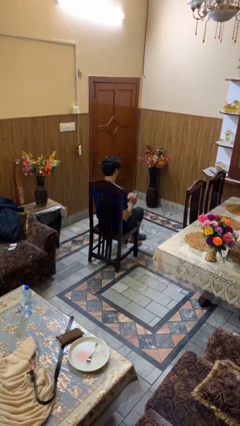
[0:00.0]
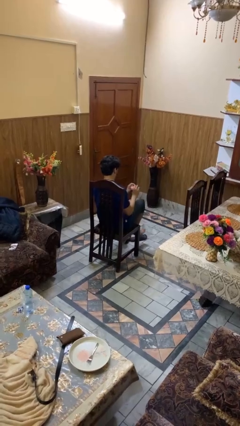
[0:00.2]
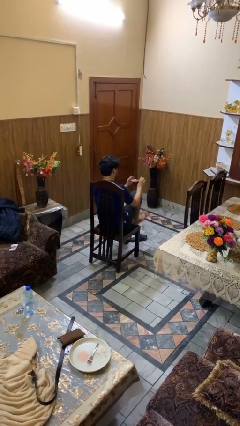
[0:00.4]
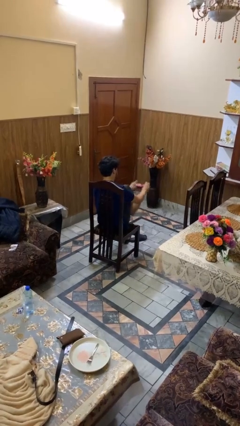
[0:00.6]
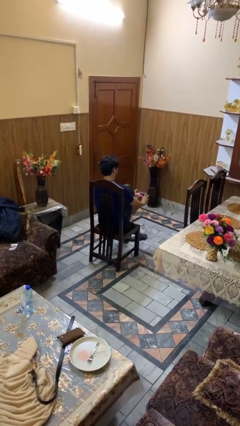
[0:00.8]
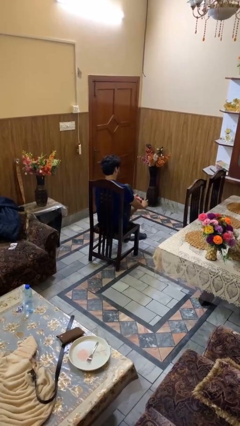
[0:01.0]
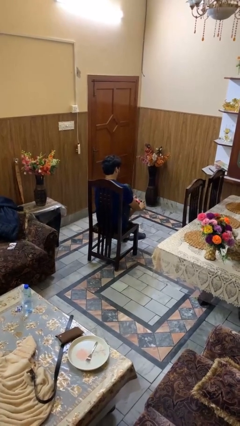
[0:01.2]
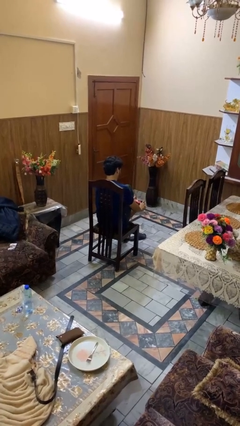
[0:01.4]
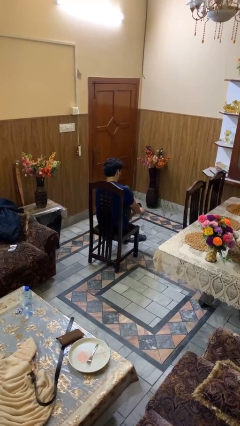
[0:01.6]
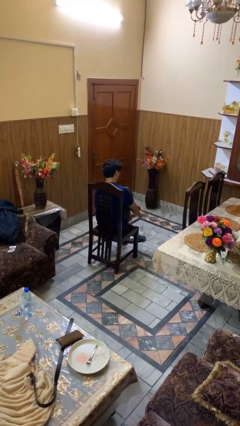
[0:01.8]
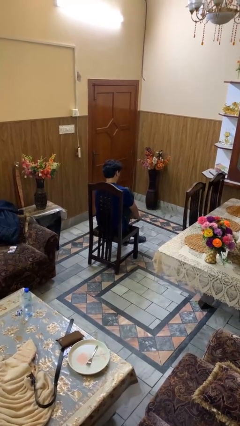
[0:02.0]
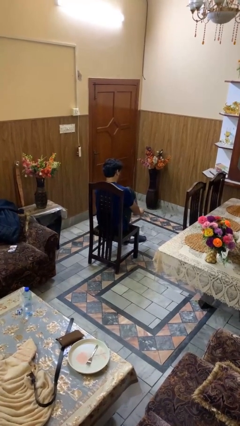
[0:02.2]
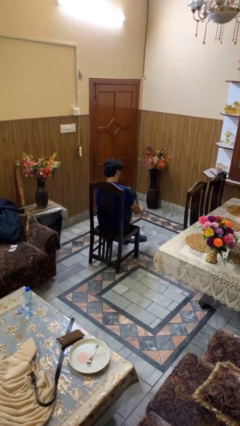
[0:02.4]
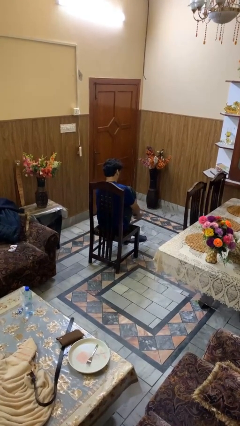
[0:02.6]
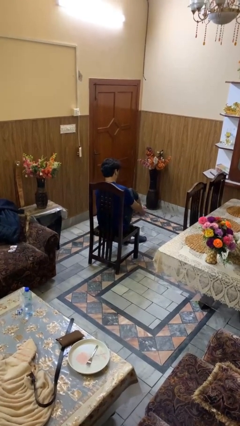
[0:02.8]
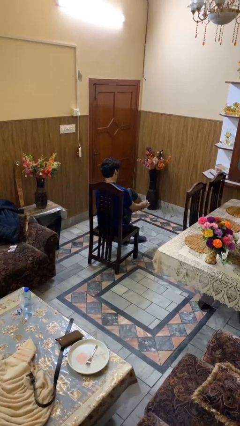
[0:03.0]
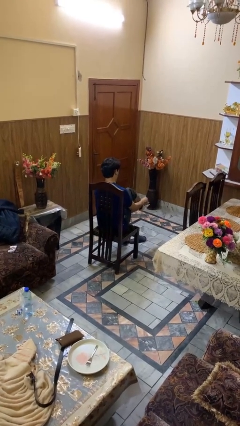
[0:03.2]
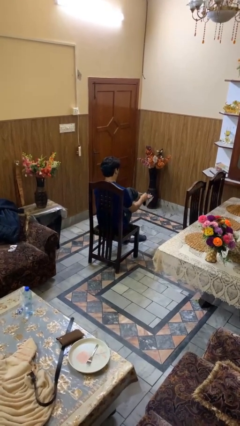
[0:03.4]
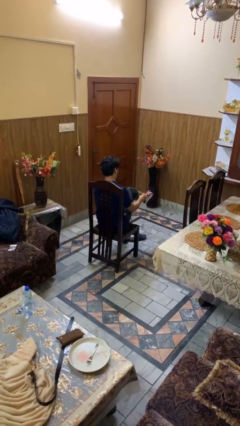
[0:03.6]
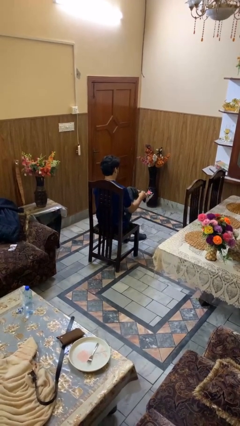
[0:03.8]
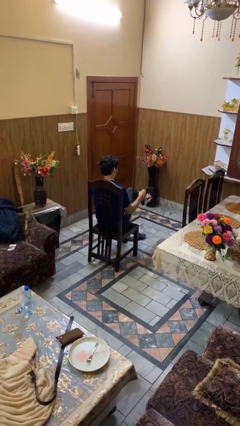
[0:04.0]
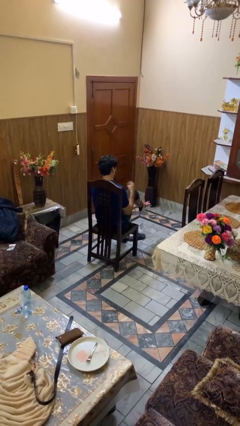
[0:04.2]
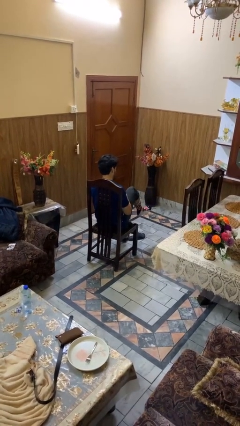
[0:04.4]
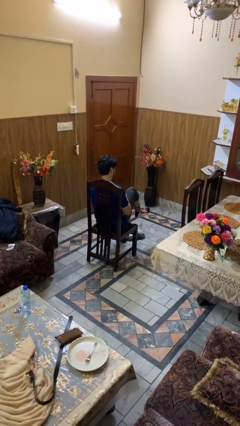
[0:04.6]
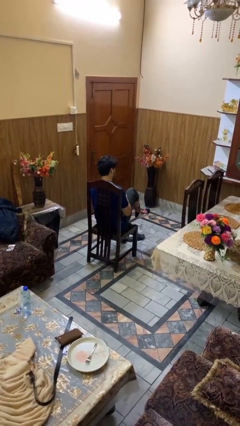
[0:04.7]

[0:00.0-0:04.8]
person puts on socks

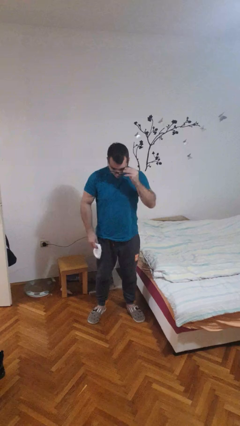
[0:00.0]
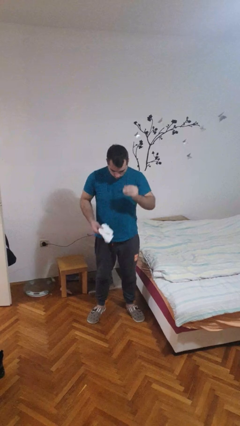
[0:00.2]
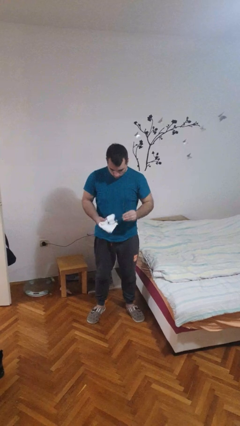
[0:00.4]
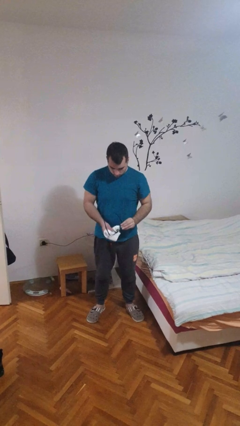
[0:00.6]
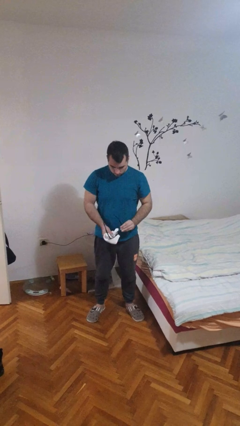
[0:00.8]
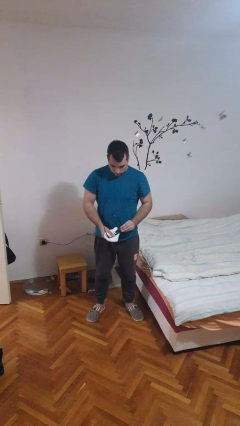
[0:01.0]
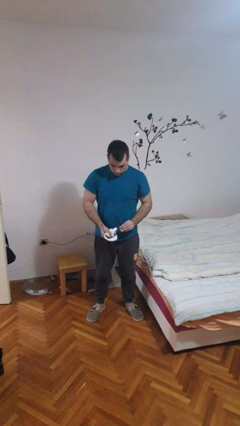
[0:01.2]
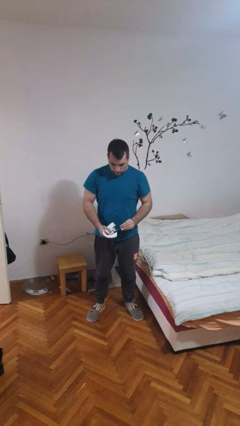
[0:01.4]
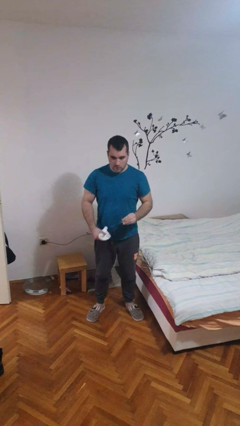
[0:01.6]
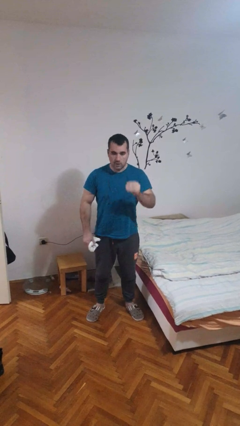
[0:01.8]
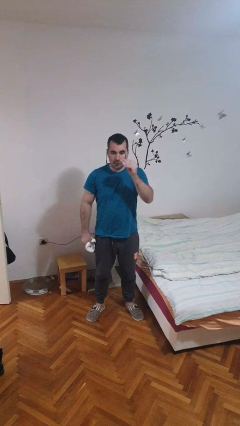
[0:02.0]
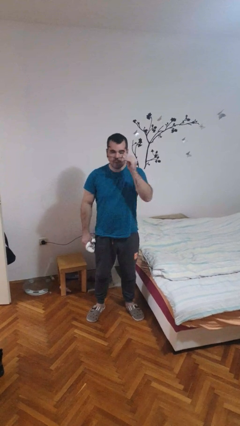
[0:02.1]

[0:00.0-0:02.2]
person cleans eyeglasses

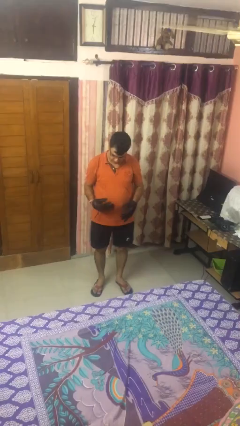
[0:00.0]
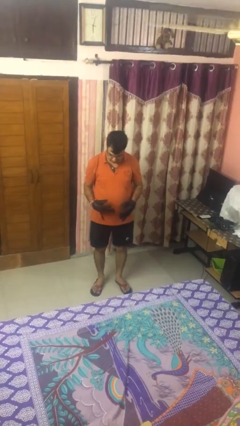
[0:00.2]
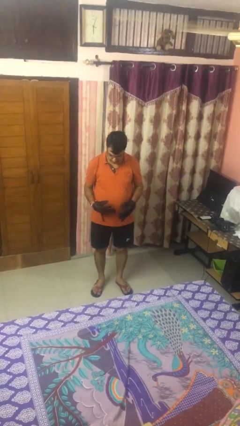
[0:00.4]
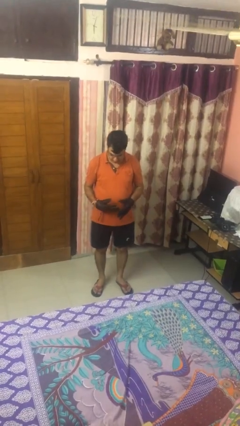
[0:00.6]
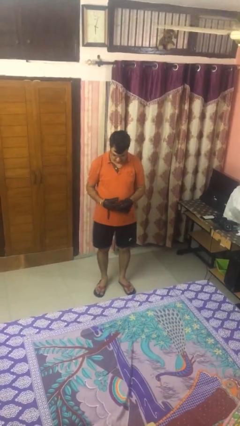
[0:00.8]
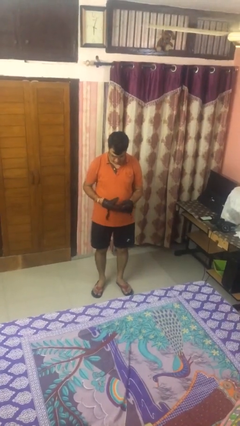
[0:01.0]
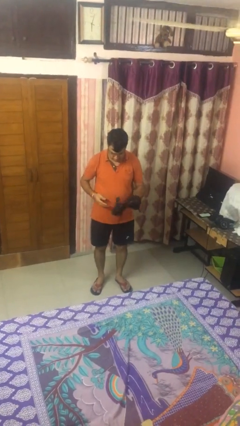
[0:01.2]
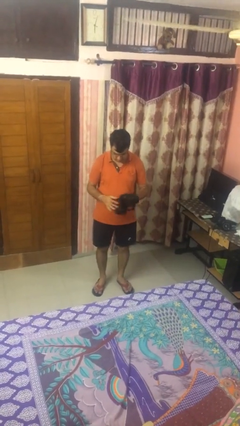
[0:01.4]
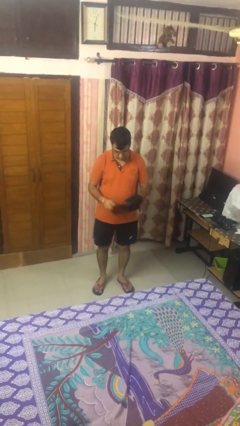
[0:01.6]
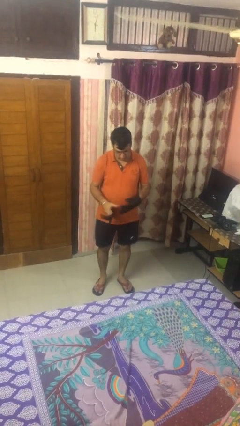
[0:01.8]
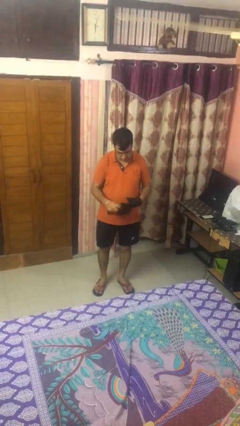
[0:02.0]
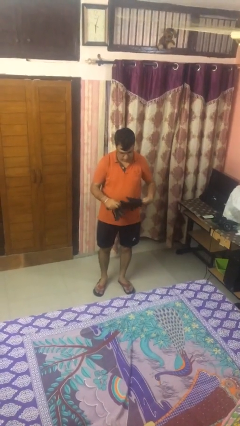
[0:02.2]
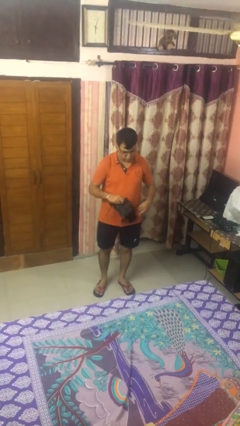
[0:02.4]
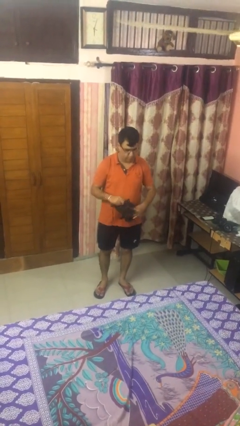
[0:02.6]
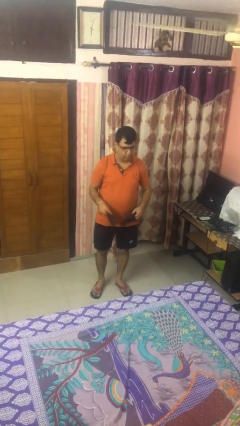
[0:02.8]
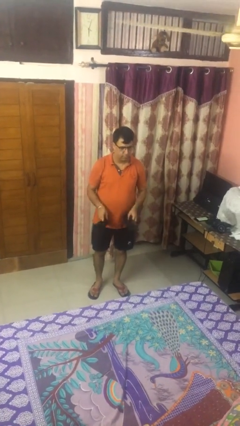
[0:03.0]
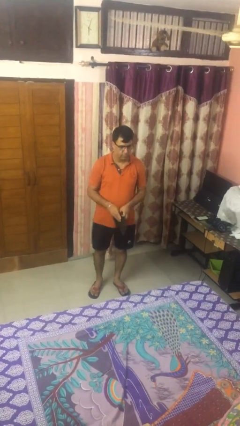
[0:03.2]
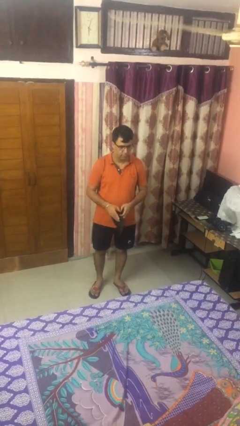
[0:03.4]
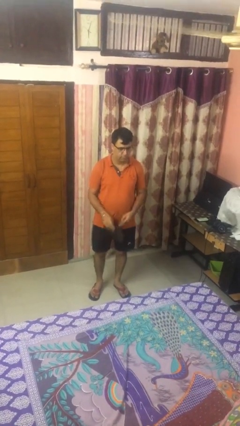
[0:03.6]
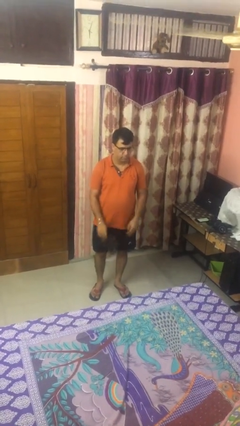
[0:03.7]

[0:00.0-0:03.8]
person takes off gloves

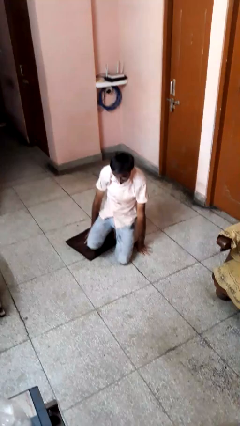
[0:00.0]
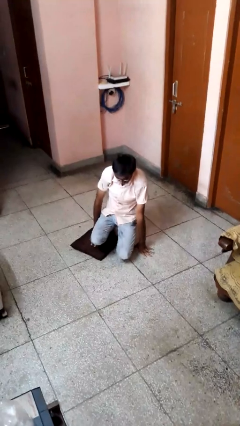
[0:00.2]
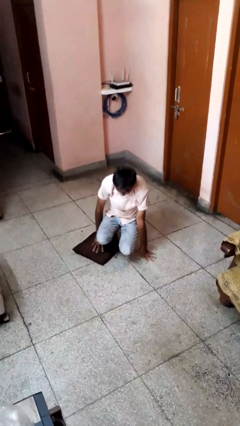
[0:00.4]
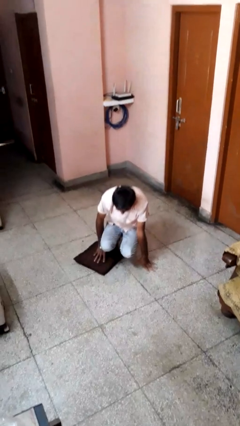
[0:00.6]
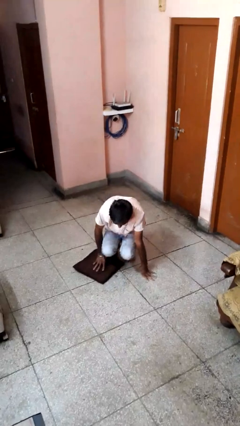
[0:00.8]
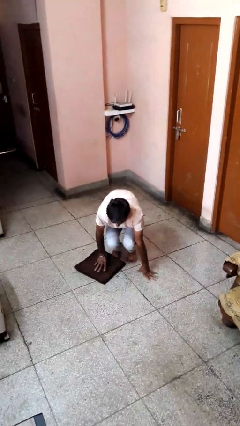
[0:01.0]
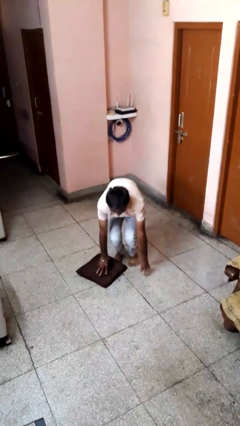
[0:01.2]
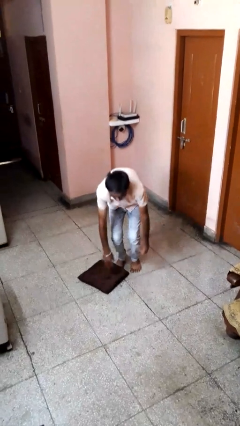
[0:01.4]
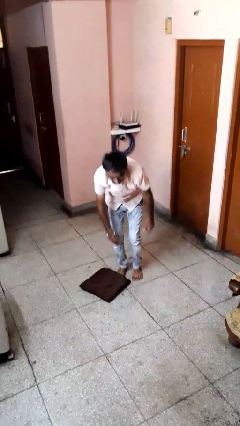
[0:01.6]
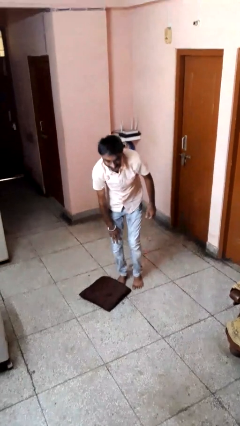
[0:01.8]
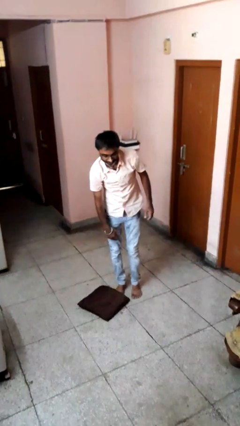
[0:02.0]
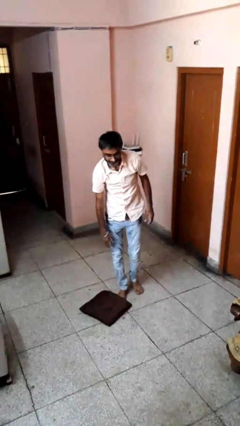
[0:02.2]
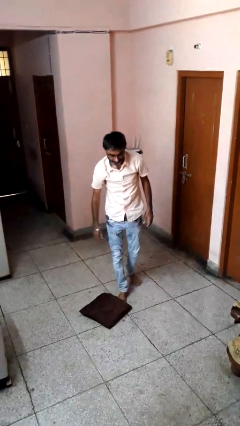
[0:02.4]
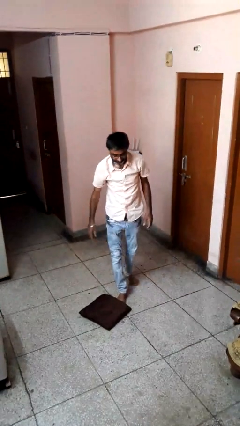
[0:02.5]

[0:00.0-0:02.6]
person stands up from floor

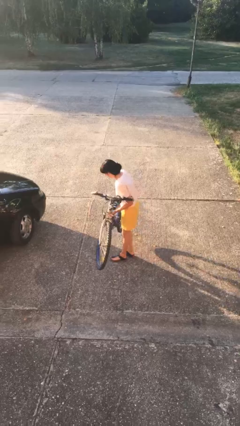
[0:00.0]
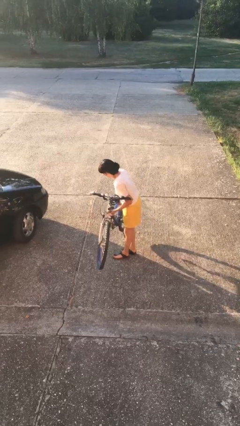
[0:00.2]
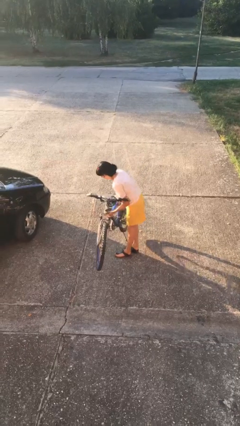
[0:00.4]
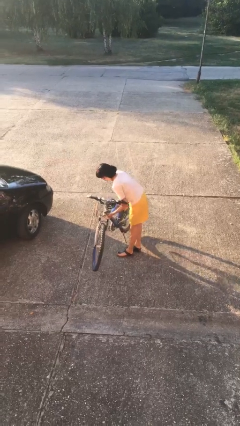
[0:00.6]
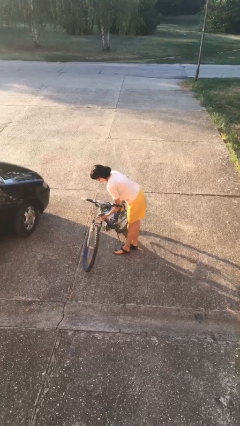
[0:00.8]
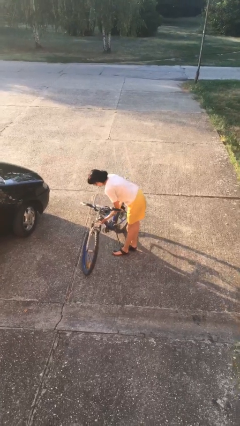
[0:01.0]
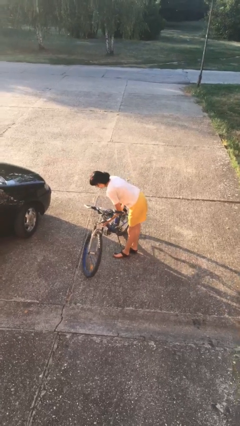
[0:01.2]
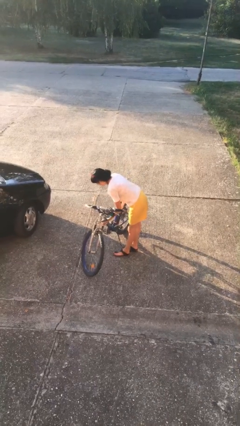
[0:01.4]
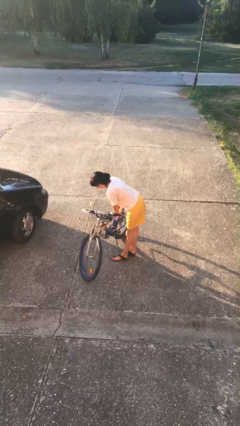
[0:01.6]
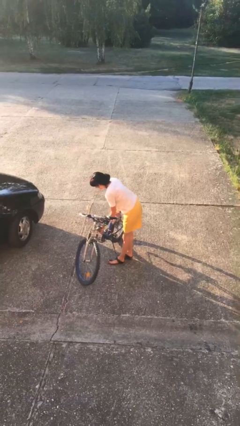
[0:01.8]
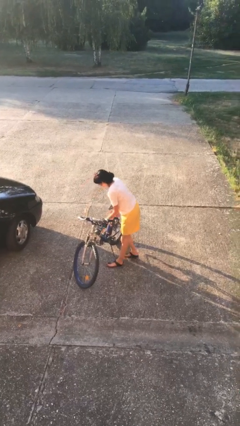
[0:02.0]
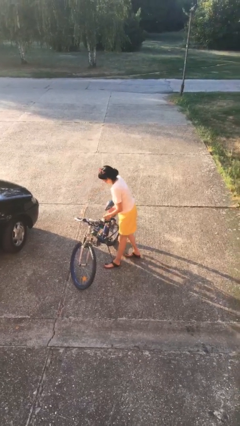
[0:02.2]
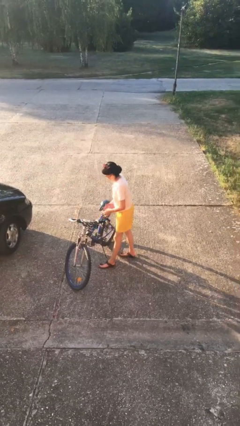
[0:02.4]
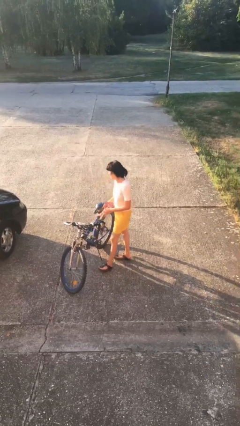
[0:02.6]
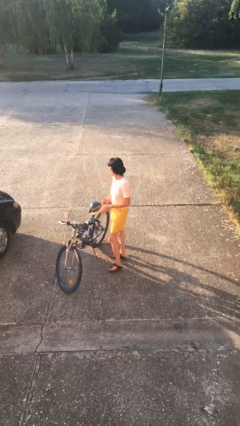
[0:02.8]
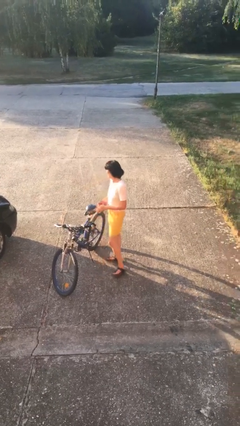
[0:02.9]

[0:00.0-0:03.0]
person puts down object on floor

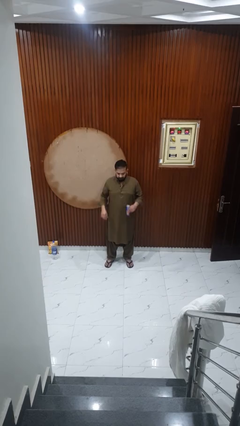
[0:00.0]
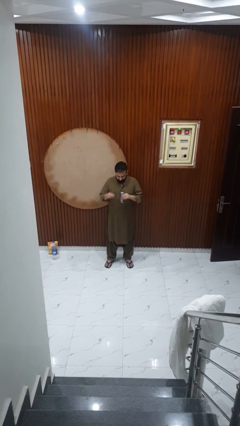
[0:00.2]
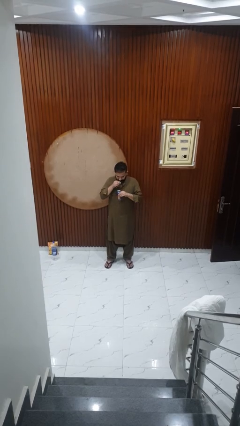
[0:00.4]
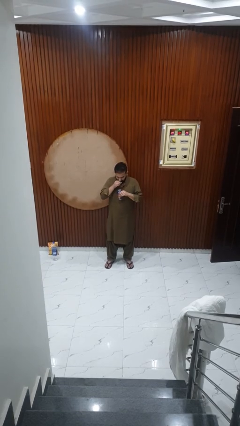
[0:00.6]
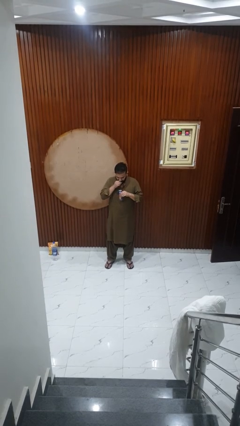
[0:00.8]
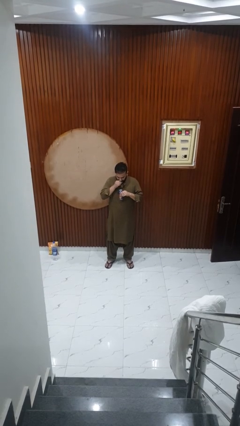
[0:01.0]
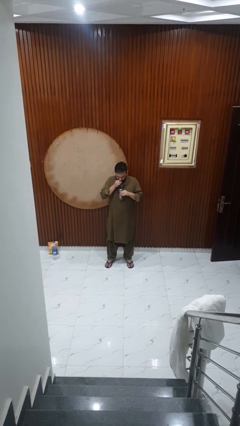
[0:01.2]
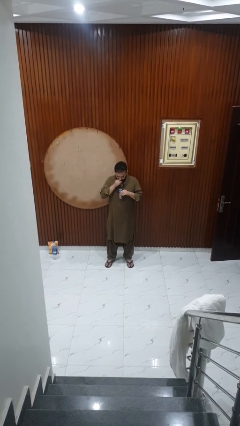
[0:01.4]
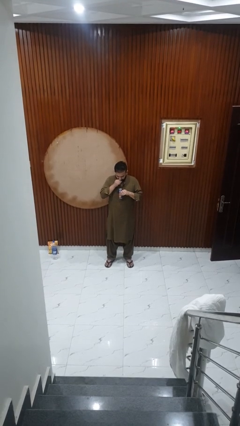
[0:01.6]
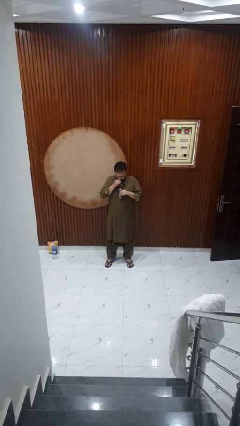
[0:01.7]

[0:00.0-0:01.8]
person drinks from straw
